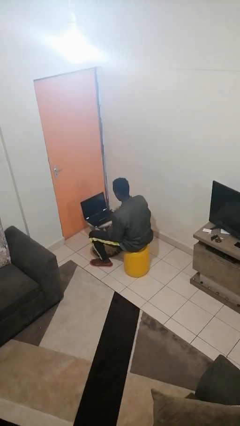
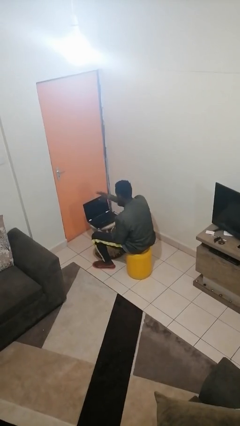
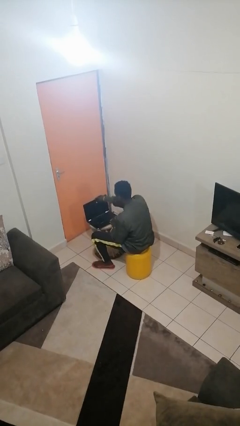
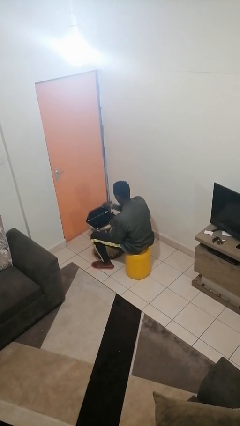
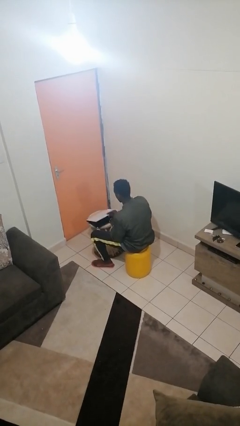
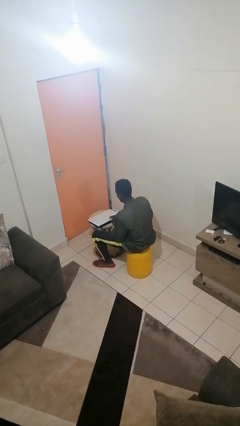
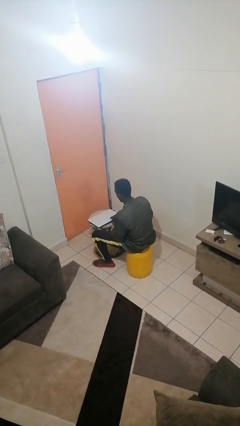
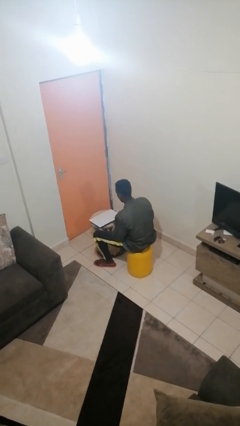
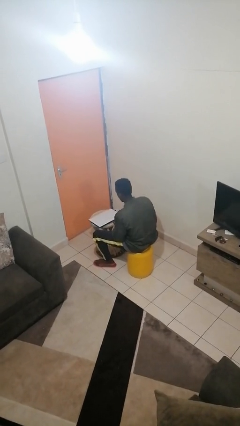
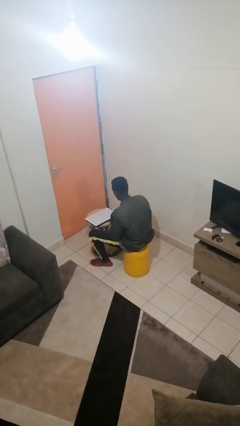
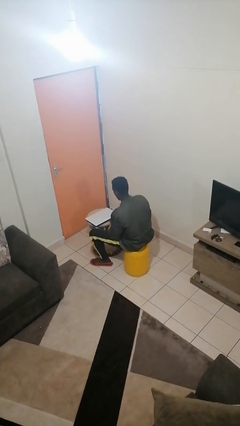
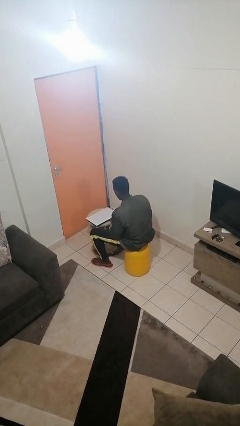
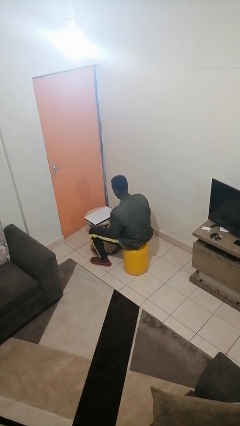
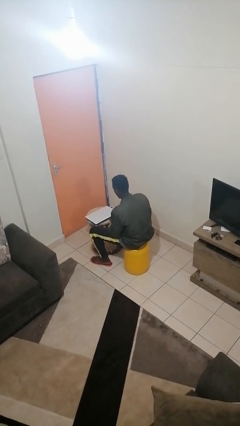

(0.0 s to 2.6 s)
person closes laptop

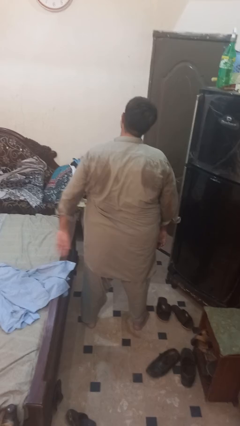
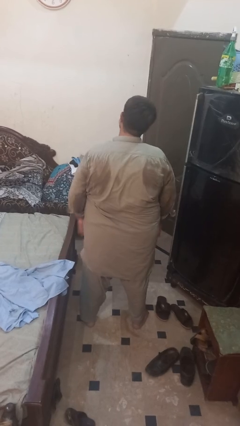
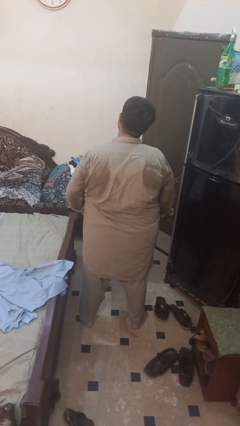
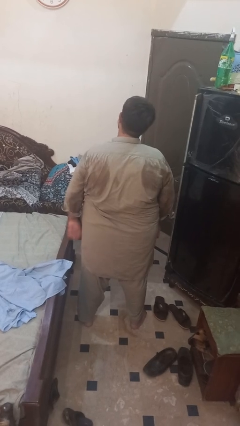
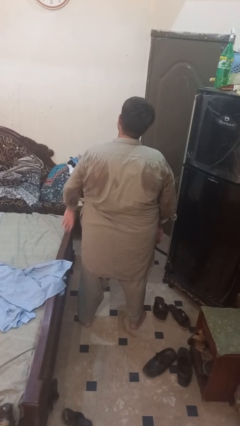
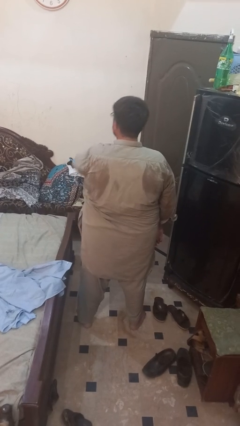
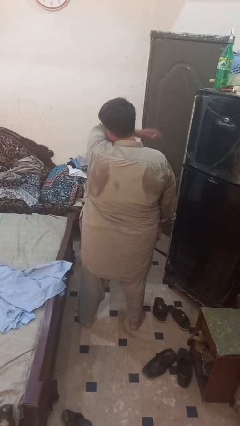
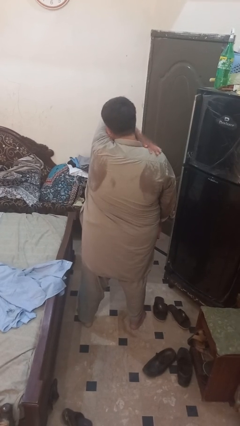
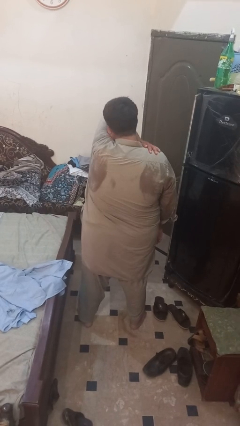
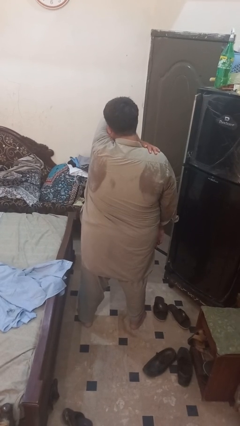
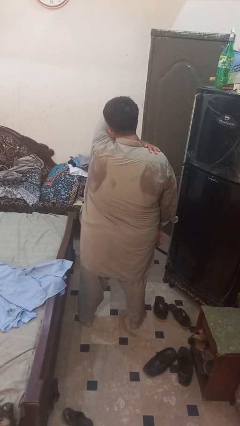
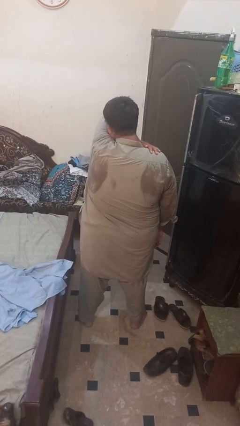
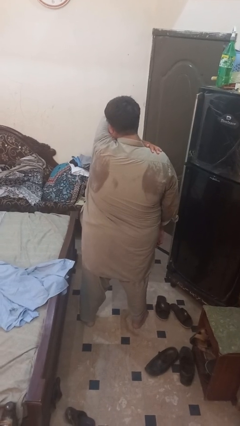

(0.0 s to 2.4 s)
person sneezes into arm

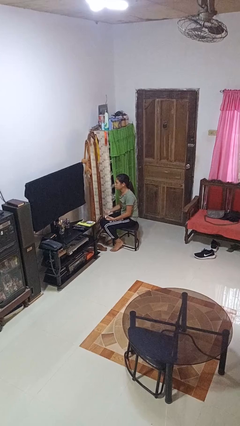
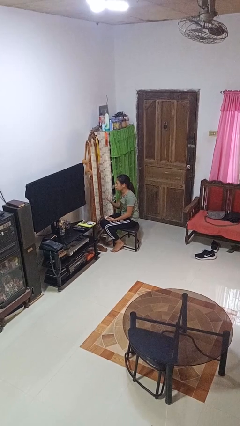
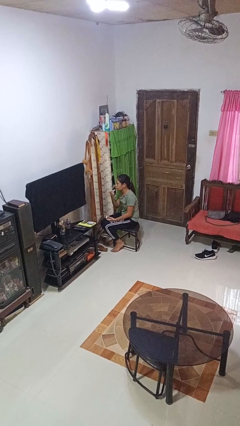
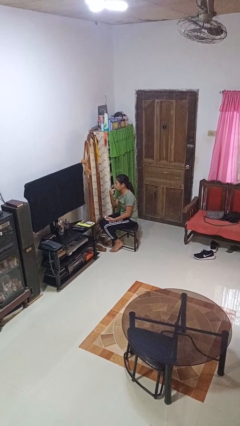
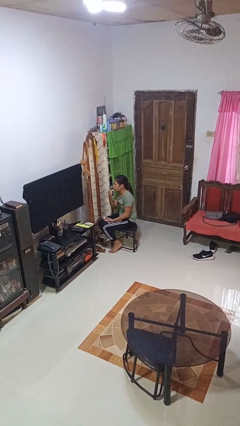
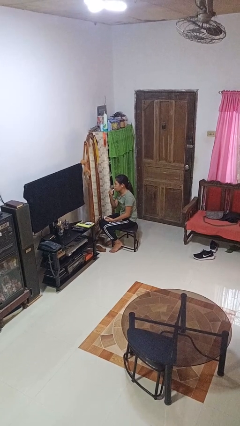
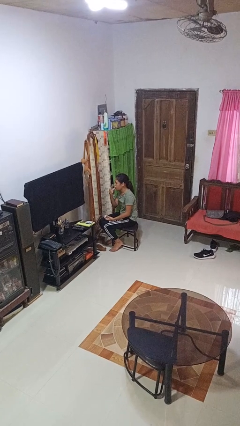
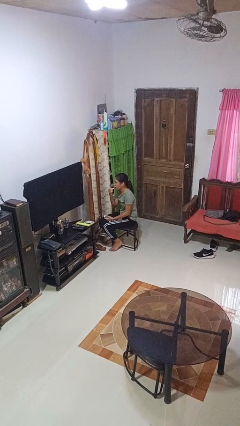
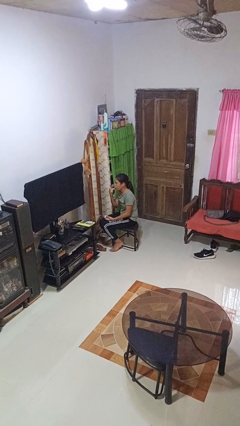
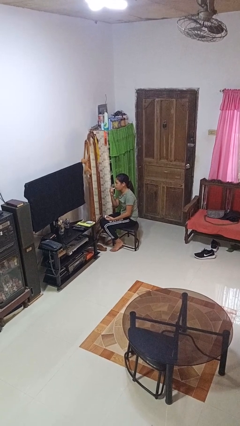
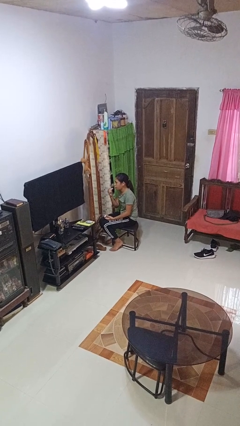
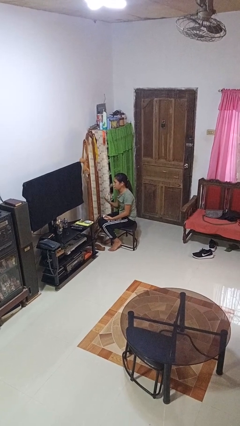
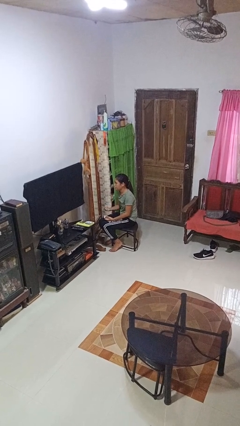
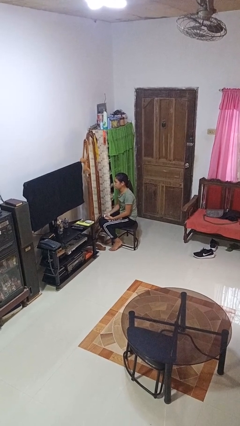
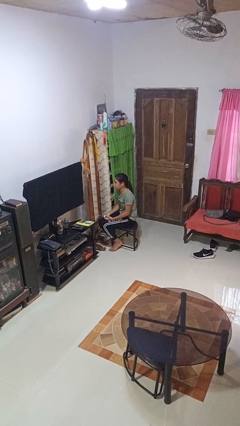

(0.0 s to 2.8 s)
person applies lip makeup

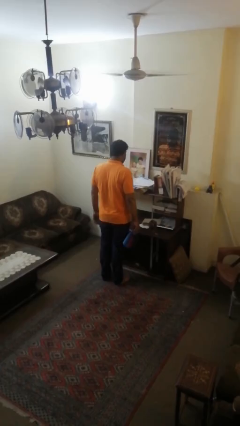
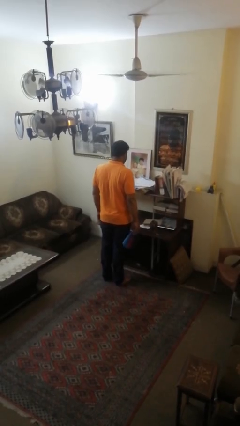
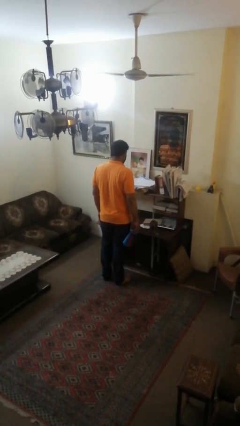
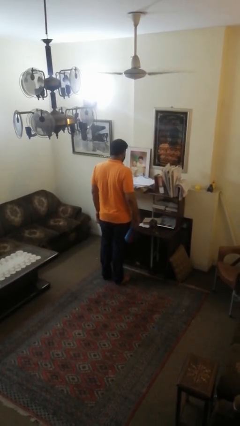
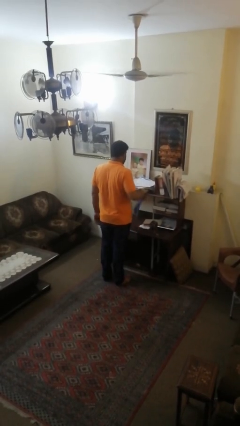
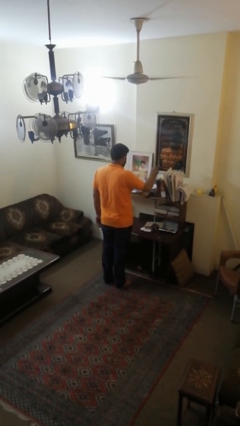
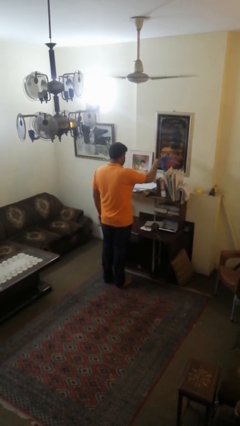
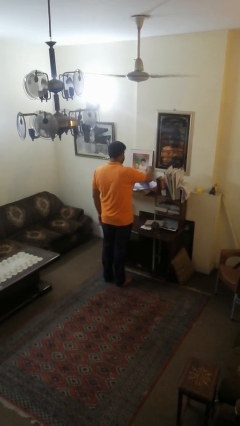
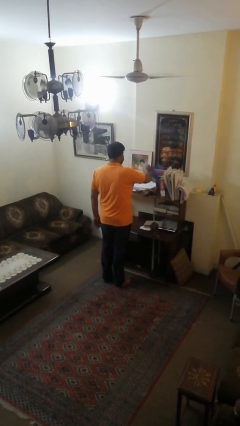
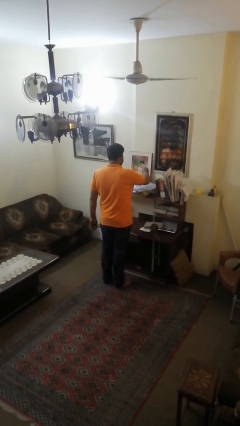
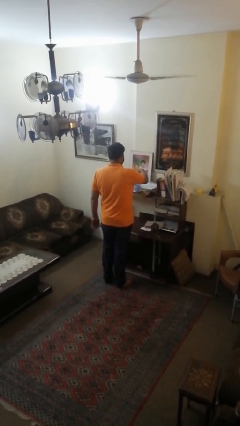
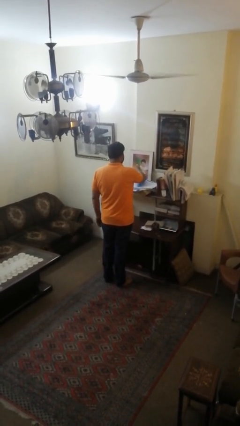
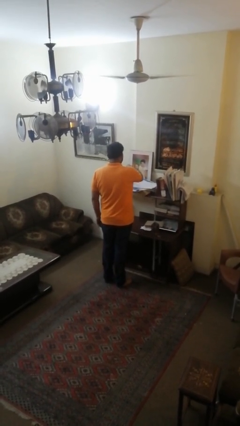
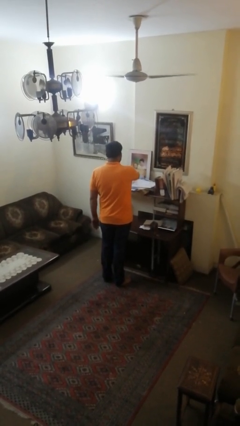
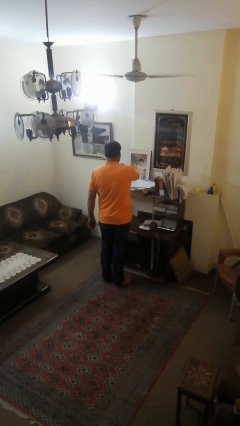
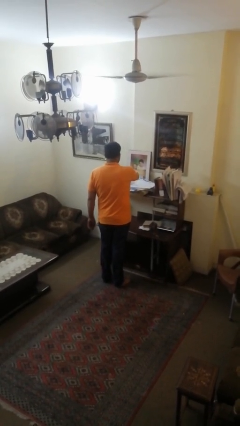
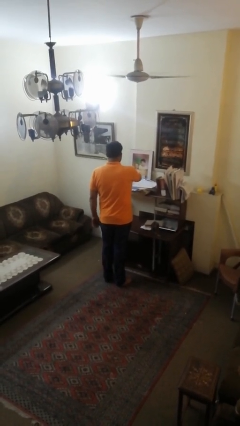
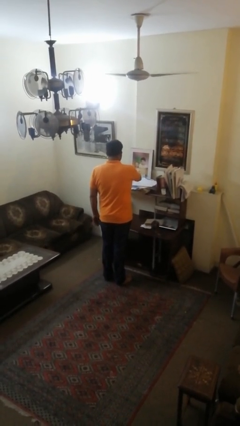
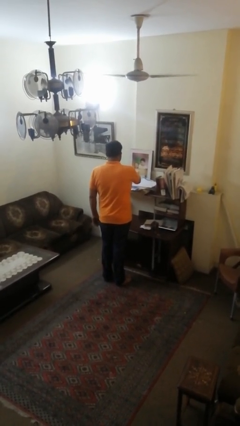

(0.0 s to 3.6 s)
person dusts furniture

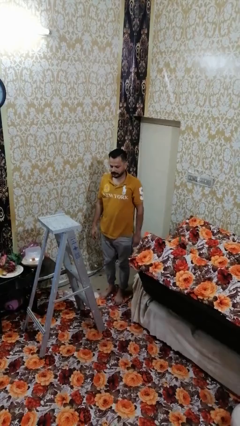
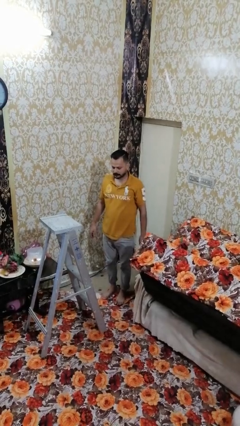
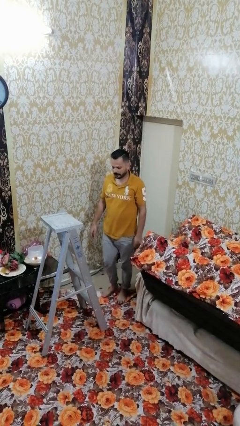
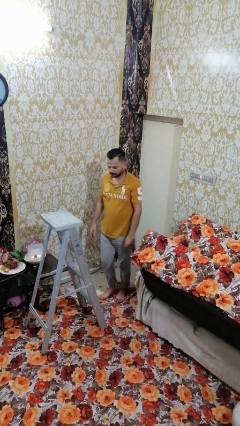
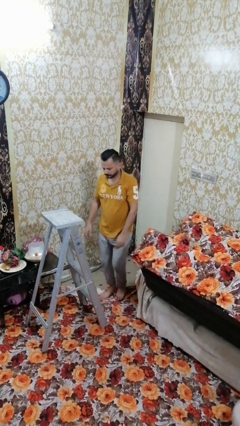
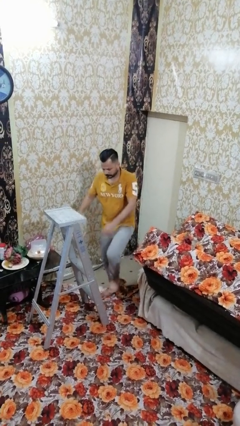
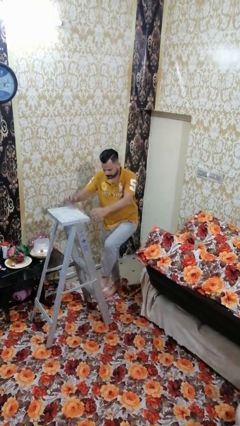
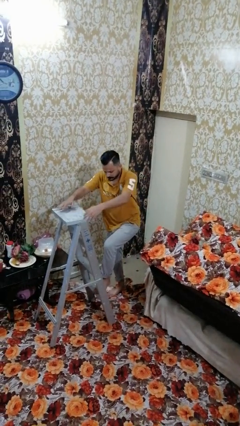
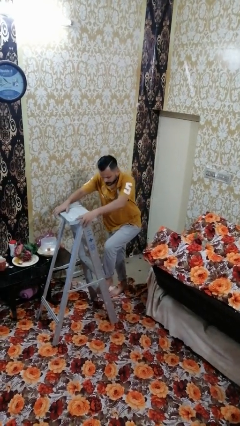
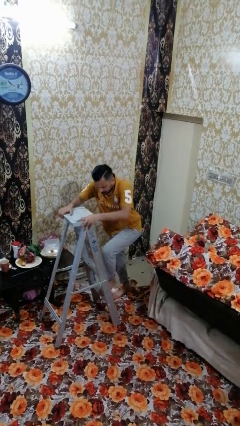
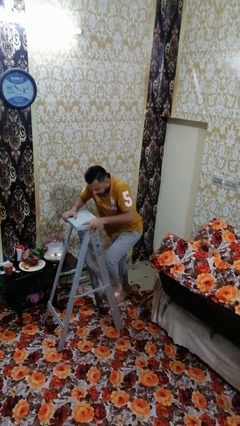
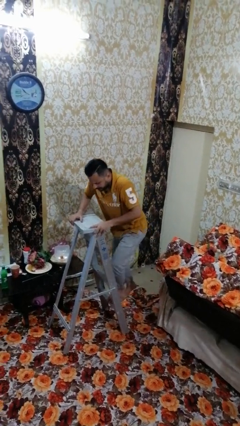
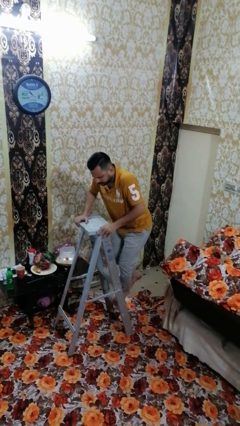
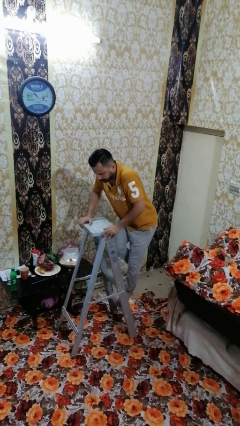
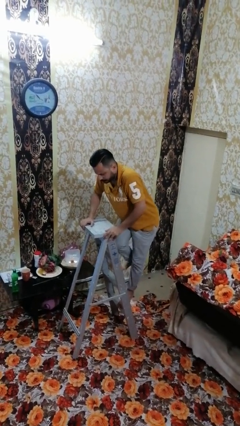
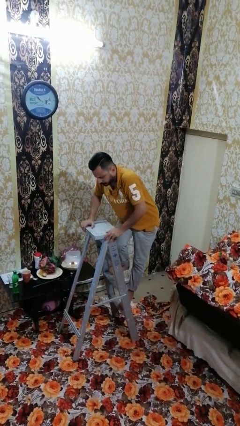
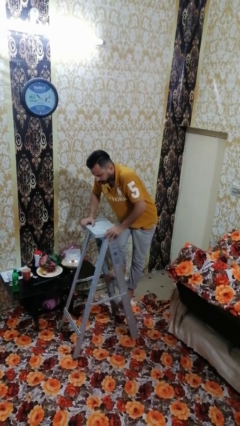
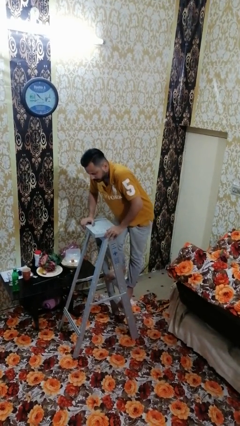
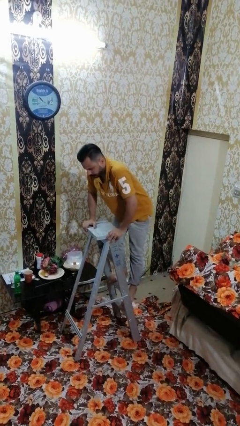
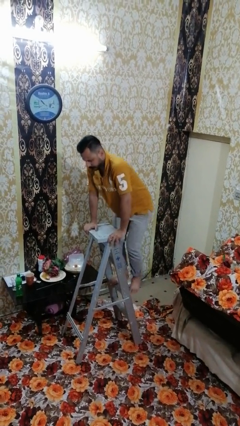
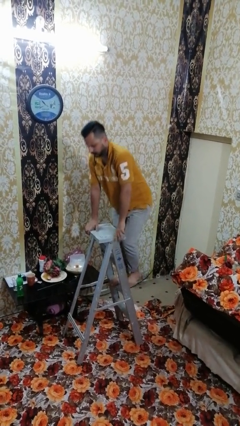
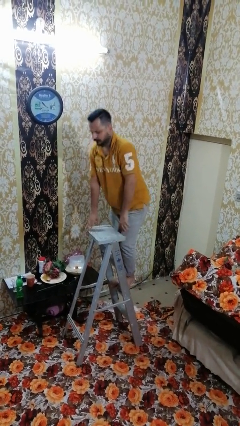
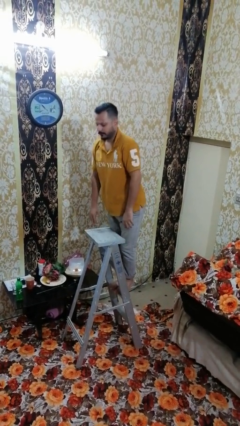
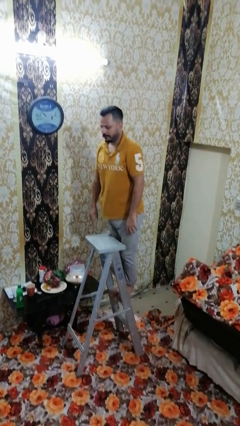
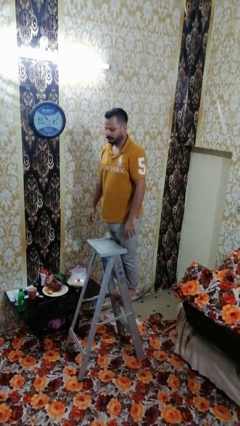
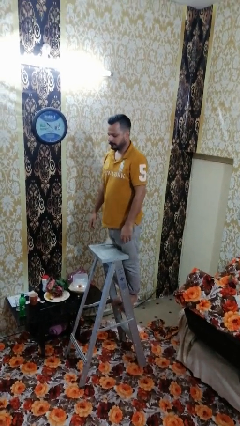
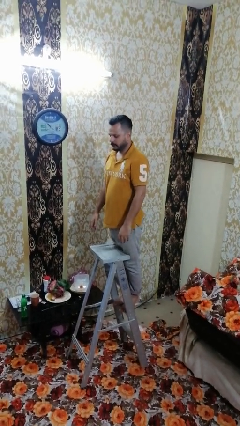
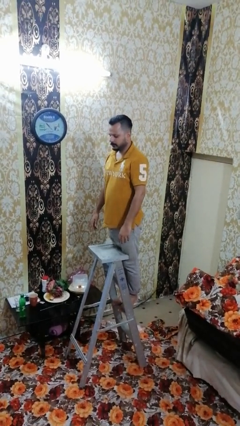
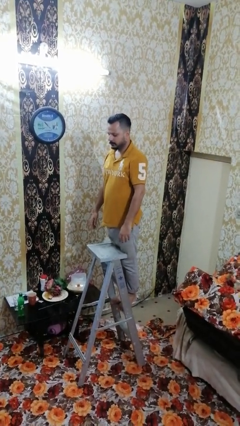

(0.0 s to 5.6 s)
person climbs up ladder

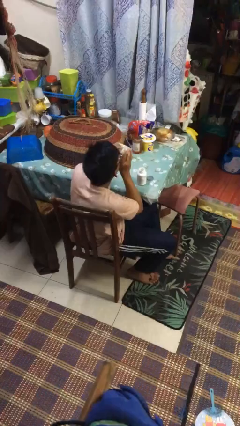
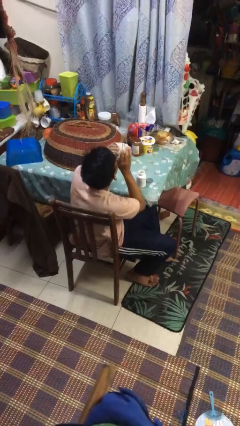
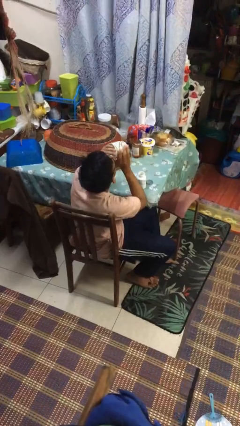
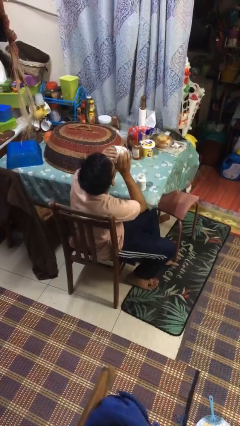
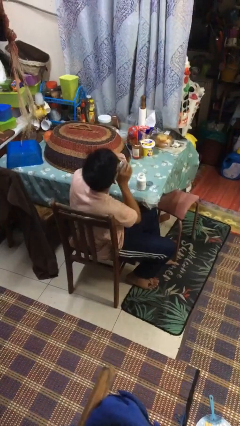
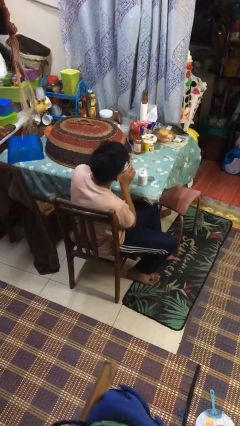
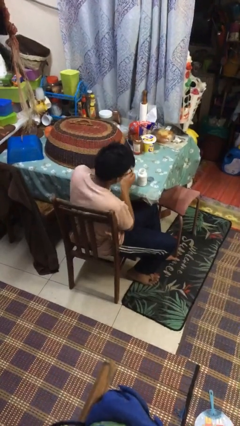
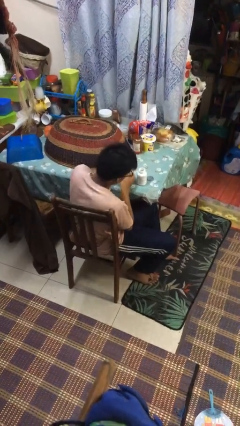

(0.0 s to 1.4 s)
person drinks from cup
